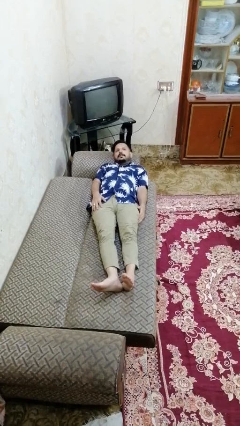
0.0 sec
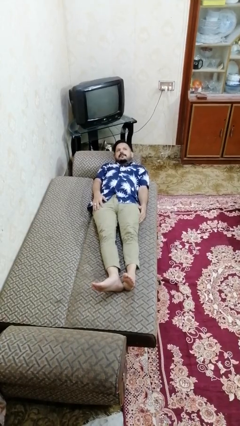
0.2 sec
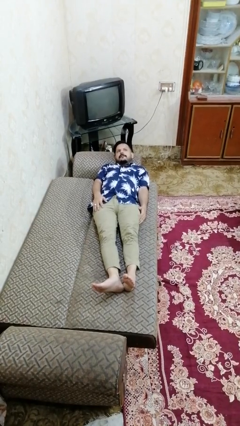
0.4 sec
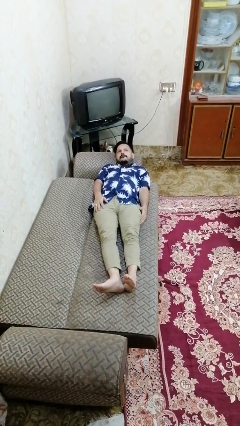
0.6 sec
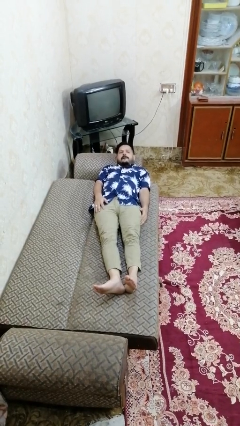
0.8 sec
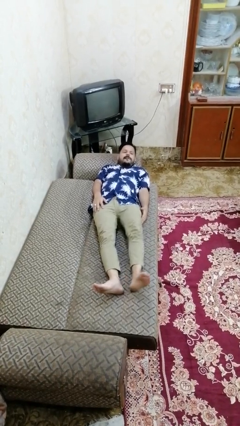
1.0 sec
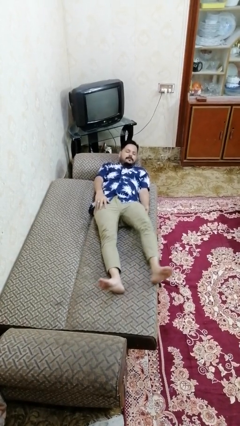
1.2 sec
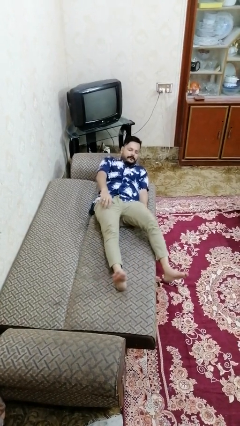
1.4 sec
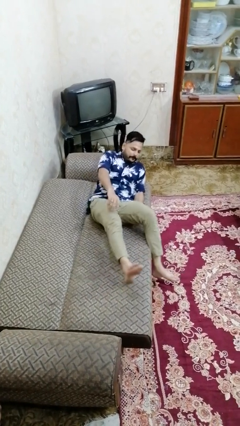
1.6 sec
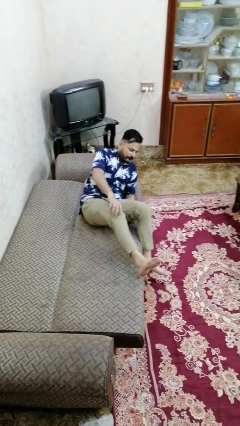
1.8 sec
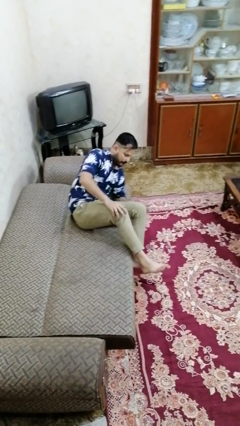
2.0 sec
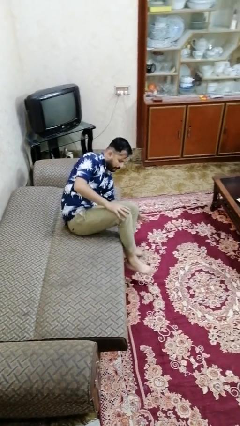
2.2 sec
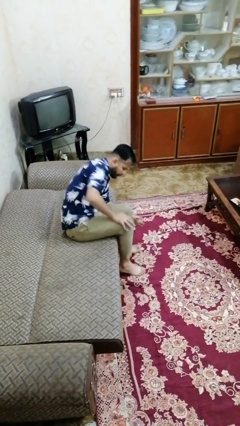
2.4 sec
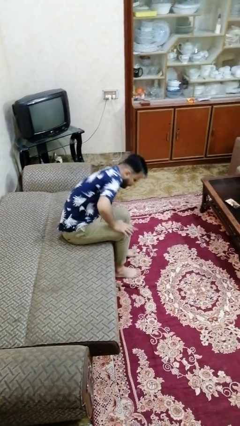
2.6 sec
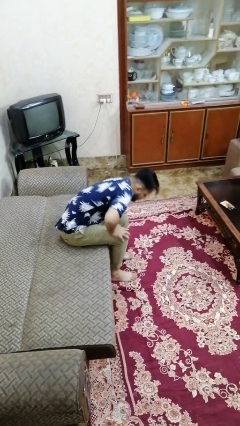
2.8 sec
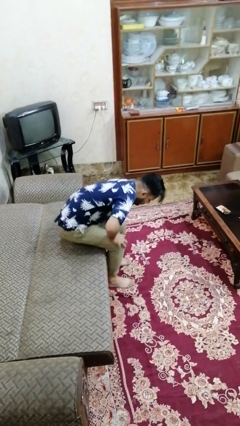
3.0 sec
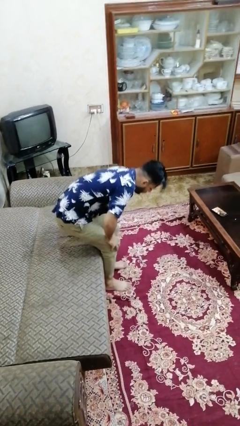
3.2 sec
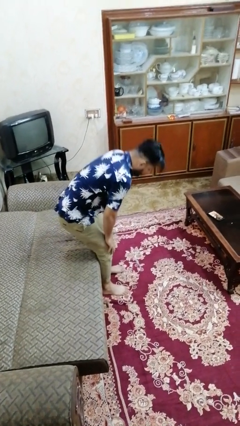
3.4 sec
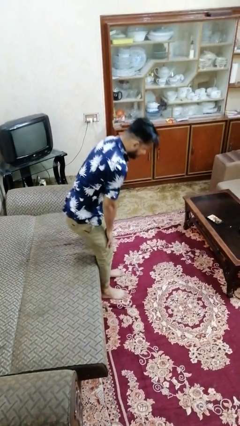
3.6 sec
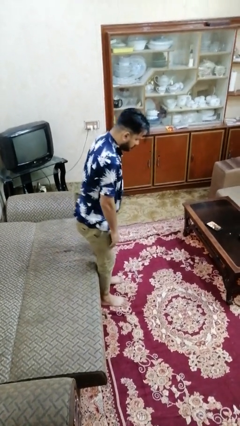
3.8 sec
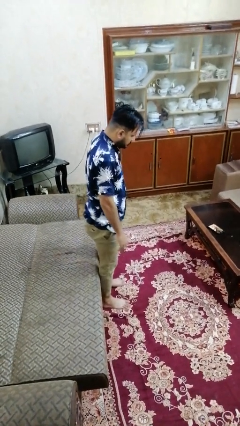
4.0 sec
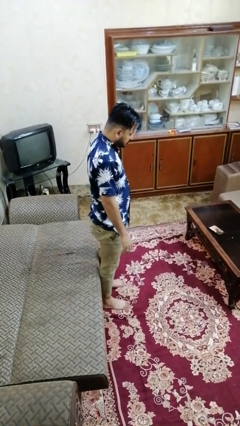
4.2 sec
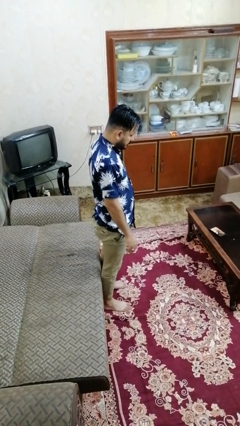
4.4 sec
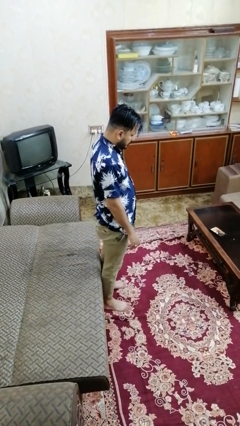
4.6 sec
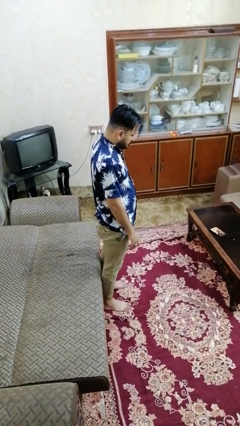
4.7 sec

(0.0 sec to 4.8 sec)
person stands up

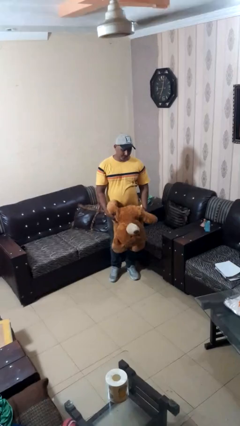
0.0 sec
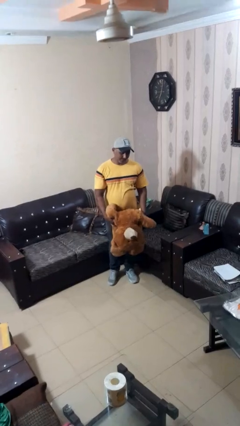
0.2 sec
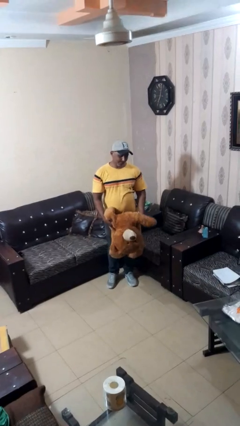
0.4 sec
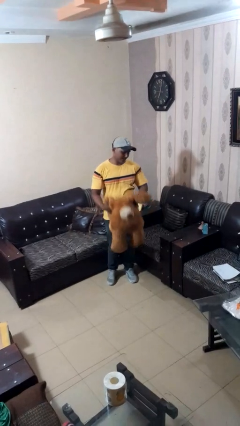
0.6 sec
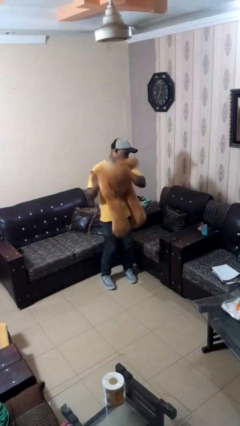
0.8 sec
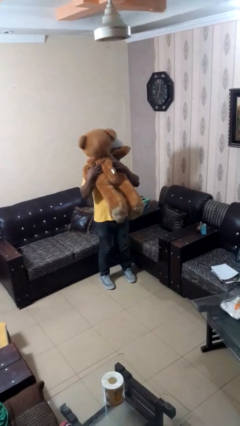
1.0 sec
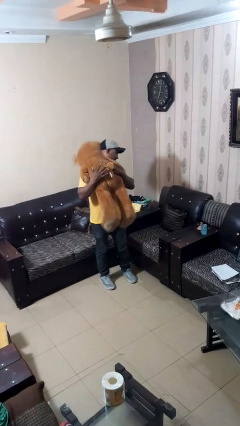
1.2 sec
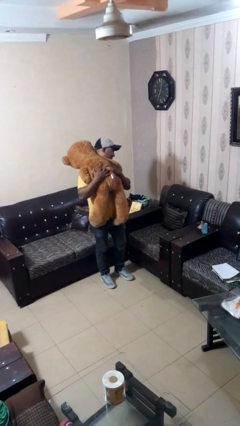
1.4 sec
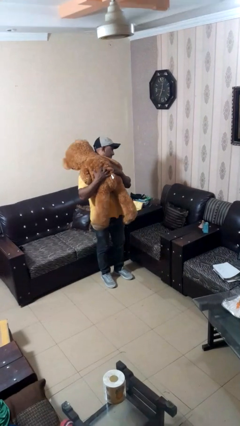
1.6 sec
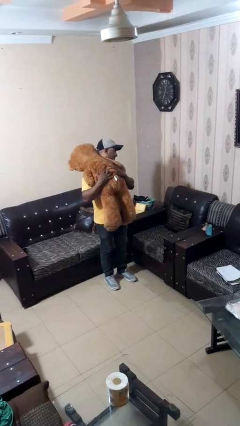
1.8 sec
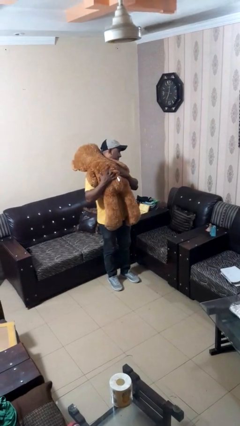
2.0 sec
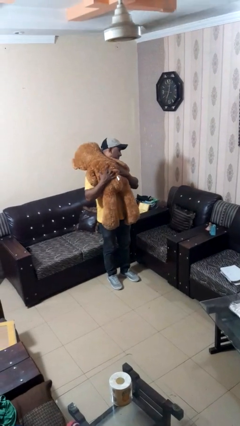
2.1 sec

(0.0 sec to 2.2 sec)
person hugs stuffed animal

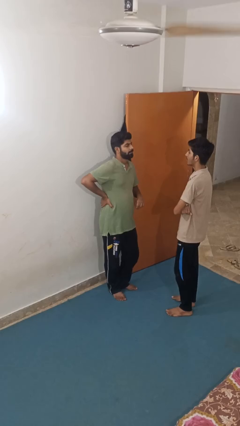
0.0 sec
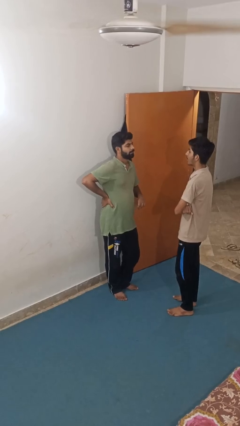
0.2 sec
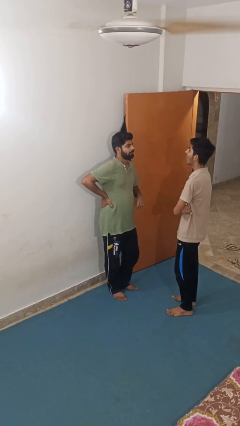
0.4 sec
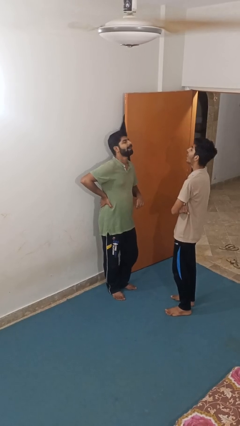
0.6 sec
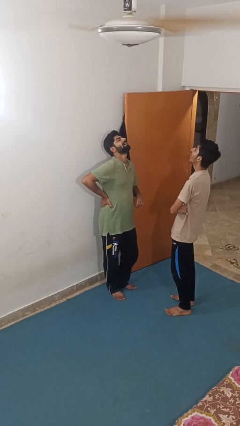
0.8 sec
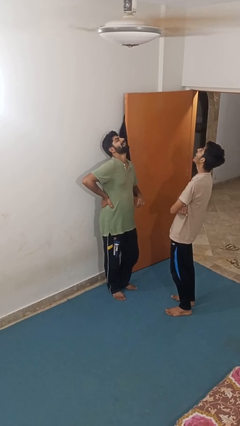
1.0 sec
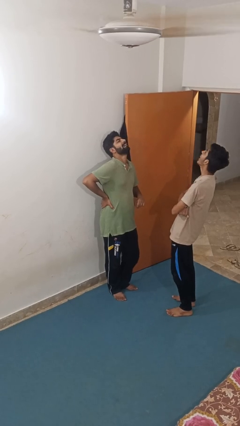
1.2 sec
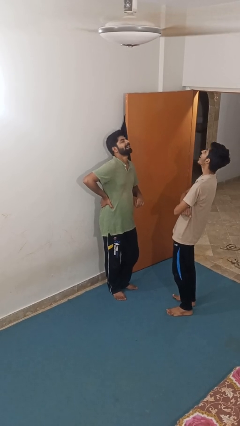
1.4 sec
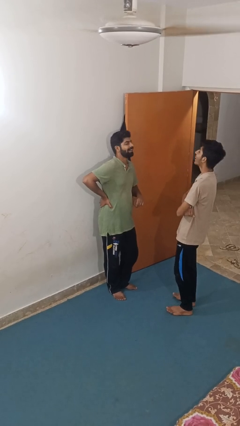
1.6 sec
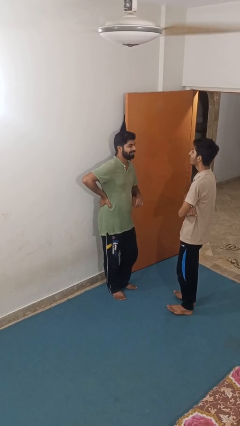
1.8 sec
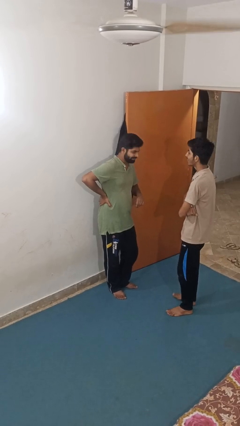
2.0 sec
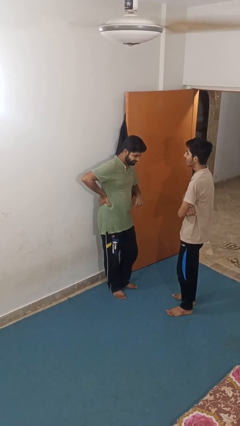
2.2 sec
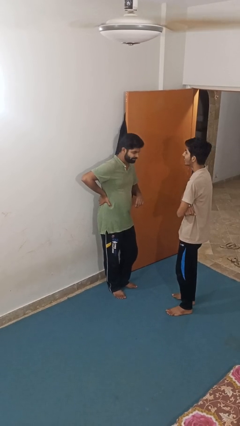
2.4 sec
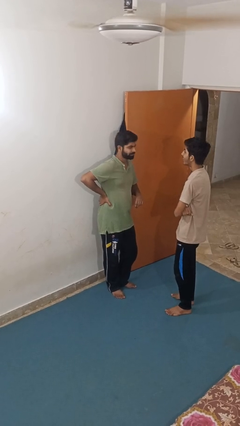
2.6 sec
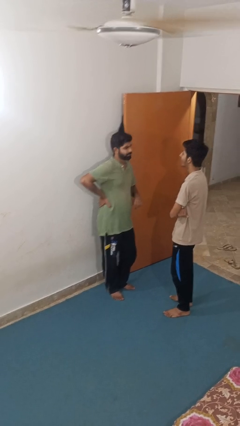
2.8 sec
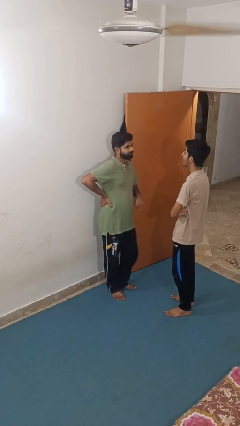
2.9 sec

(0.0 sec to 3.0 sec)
person laughs with person

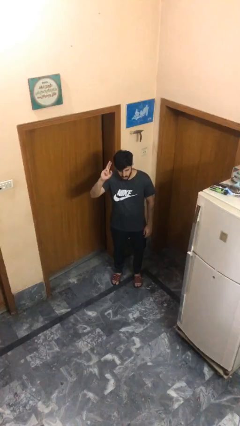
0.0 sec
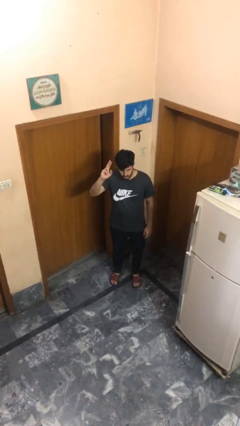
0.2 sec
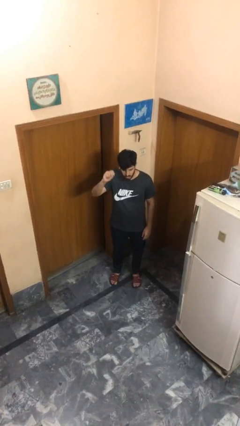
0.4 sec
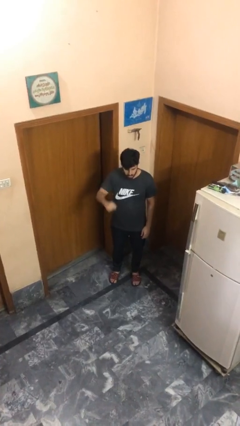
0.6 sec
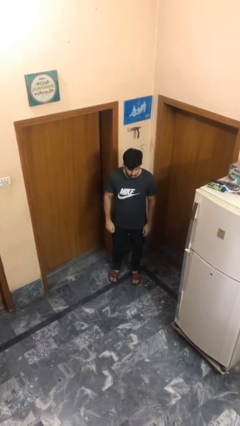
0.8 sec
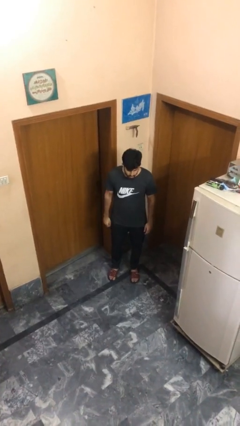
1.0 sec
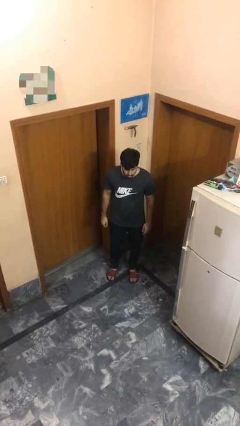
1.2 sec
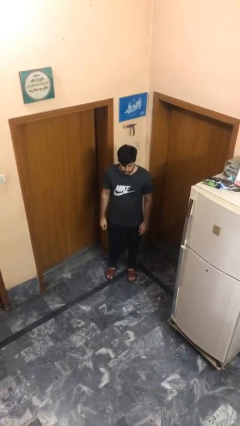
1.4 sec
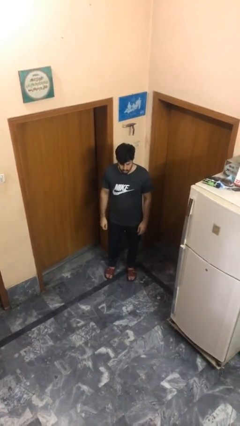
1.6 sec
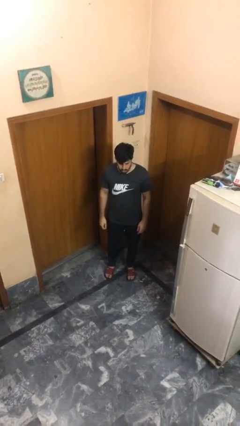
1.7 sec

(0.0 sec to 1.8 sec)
person gestures lower hand

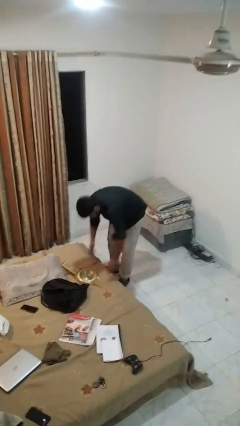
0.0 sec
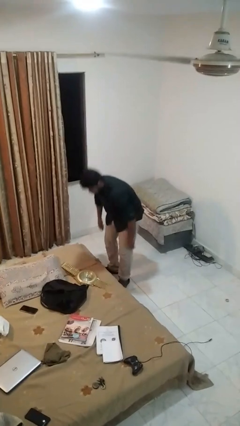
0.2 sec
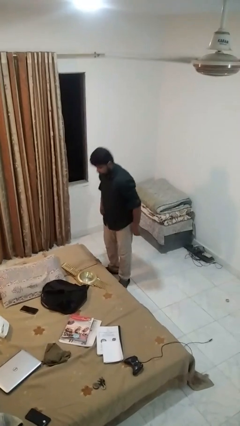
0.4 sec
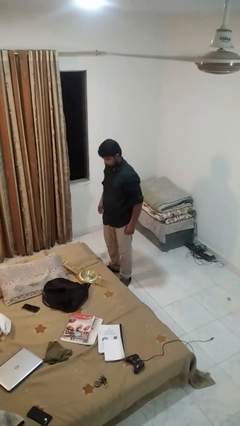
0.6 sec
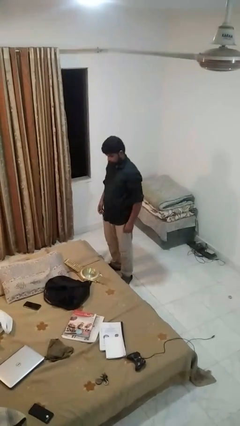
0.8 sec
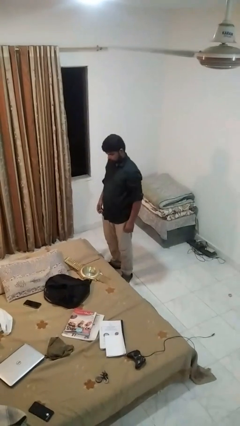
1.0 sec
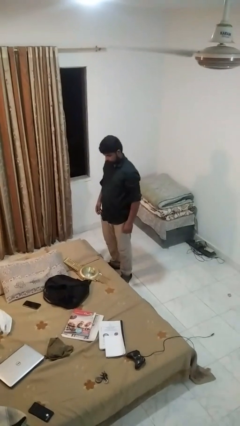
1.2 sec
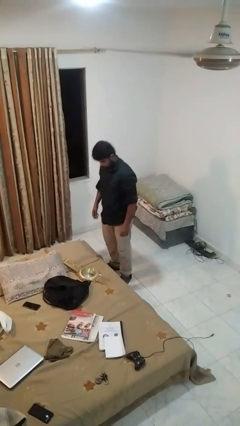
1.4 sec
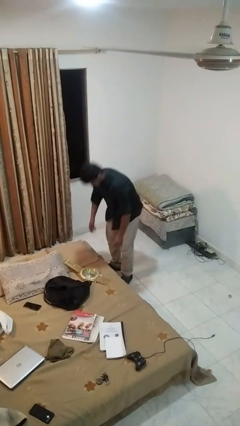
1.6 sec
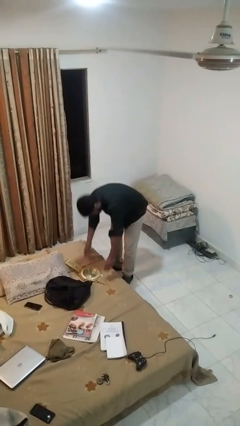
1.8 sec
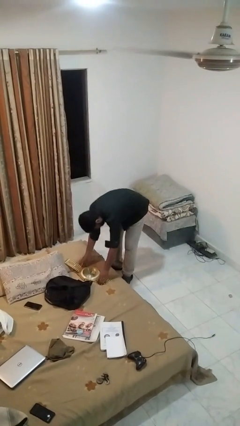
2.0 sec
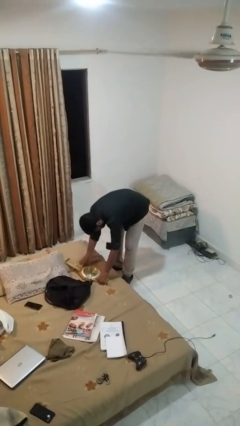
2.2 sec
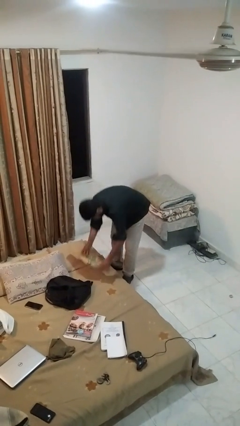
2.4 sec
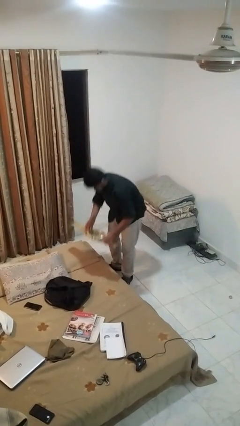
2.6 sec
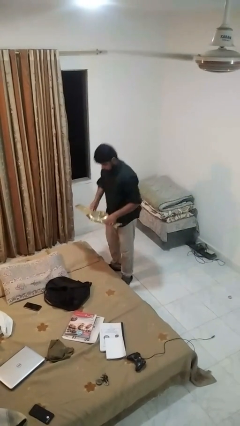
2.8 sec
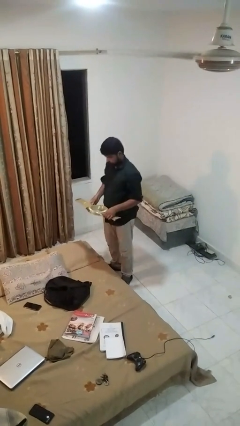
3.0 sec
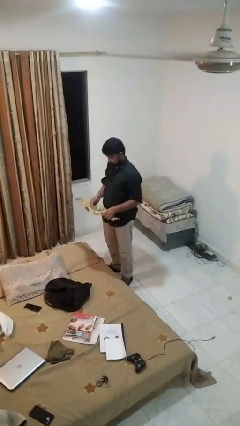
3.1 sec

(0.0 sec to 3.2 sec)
person picks up object from bed

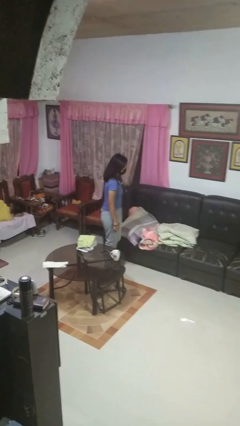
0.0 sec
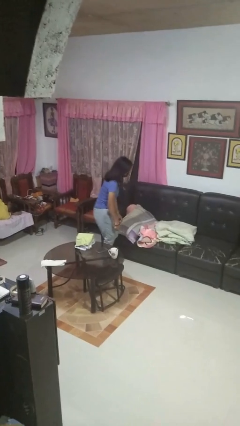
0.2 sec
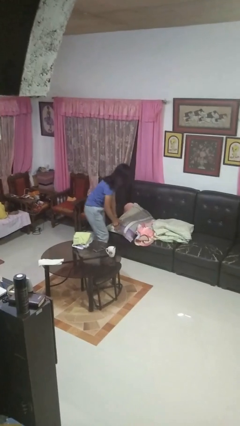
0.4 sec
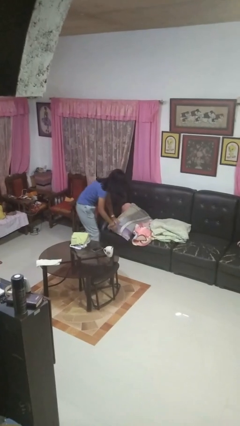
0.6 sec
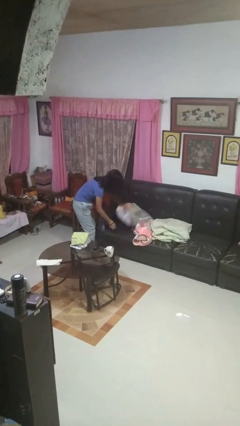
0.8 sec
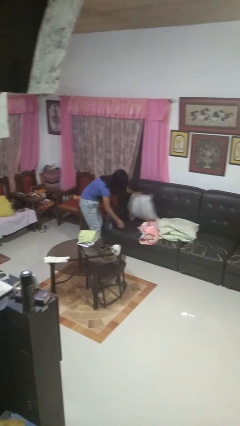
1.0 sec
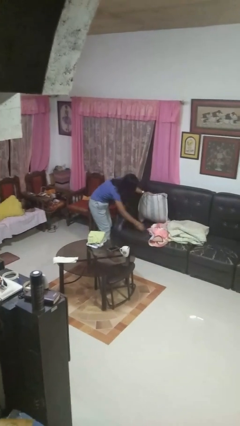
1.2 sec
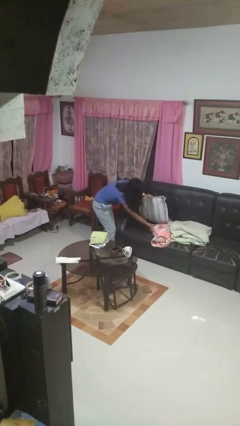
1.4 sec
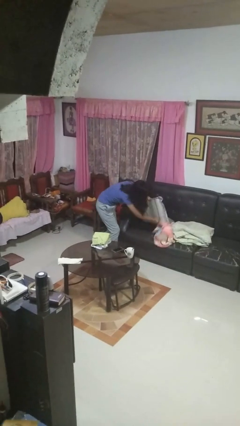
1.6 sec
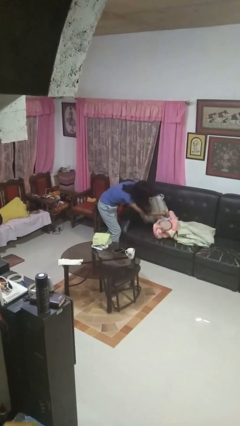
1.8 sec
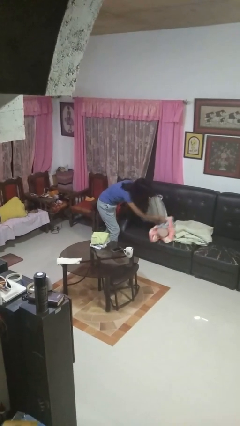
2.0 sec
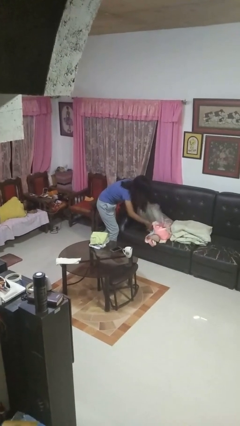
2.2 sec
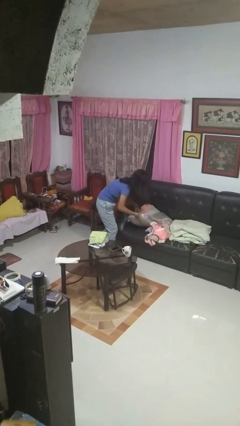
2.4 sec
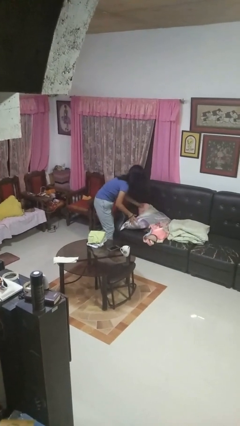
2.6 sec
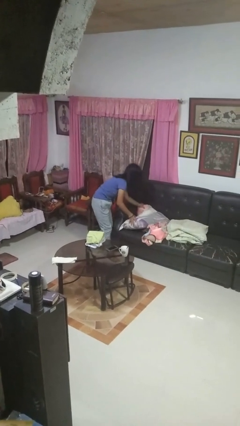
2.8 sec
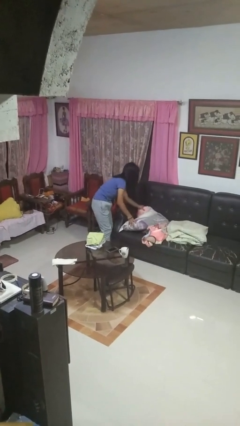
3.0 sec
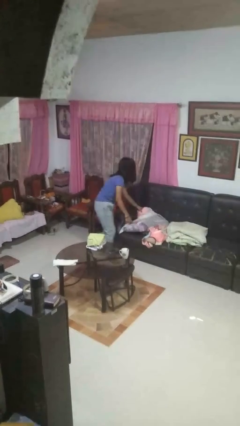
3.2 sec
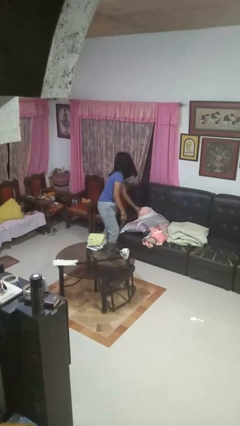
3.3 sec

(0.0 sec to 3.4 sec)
person searches in couch
